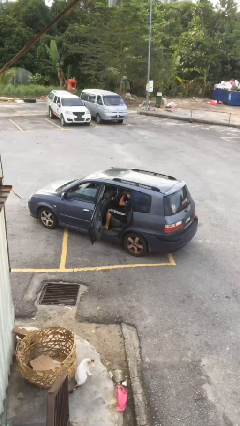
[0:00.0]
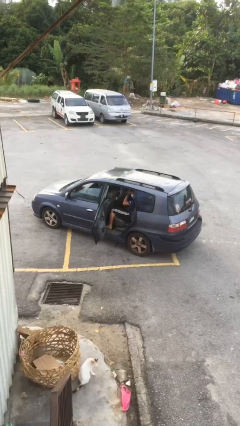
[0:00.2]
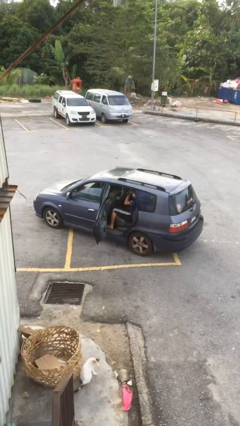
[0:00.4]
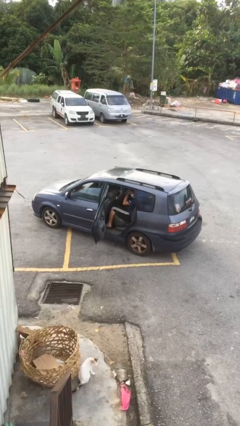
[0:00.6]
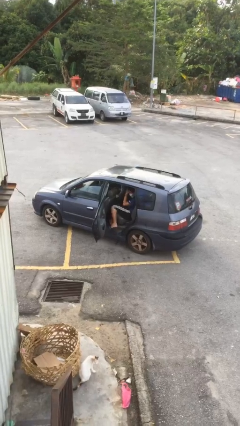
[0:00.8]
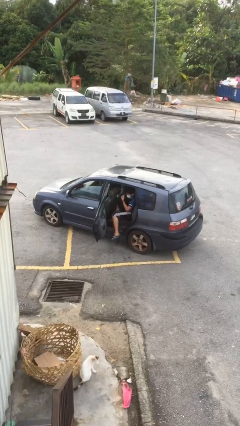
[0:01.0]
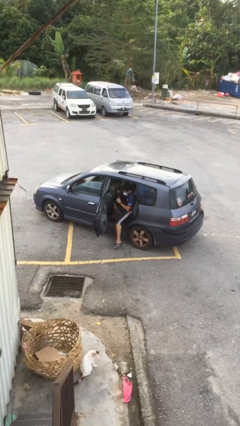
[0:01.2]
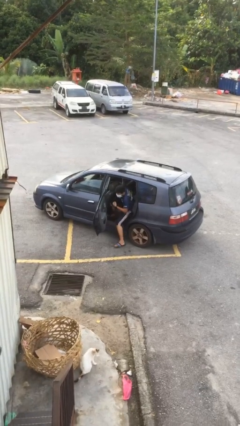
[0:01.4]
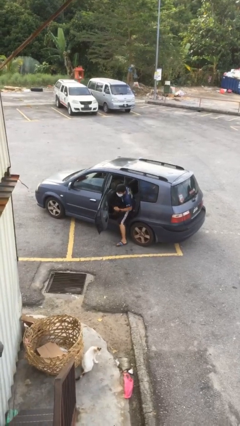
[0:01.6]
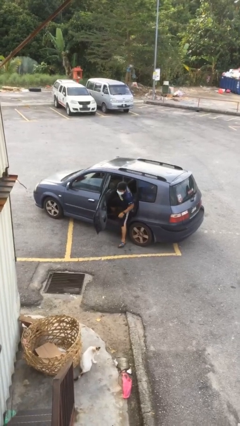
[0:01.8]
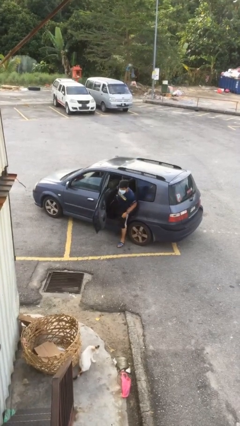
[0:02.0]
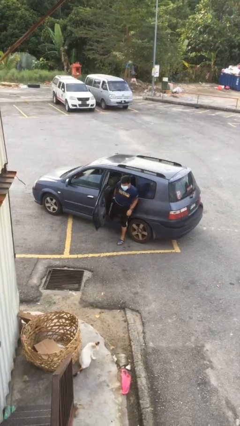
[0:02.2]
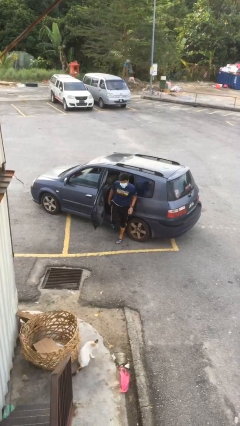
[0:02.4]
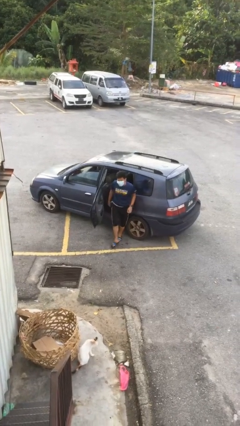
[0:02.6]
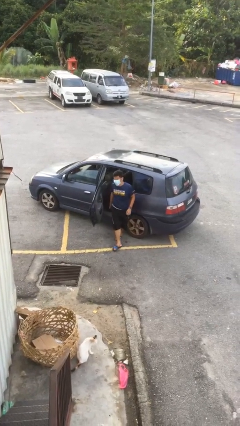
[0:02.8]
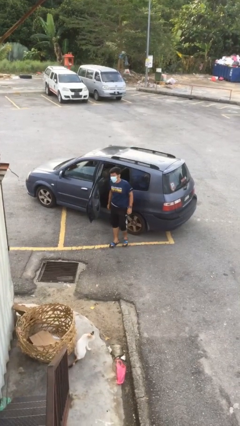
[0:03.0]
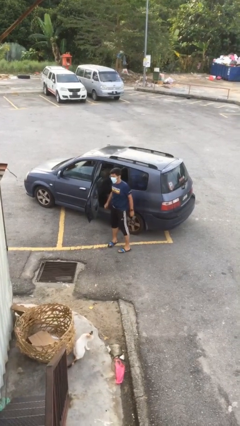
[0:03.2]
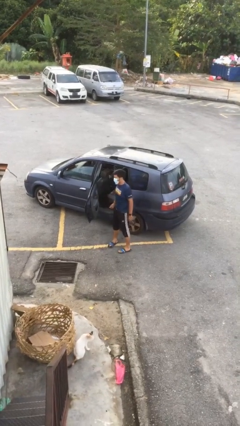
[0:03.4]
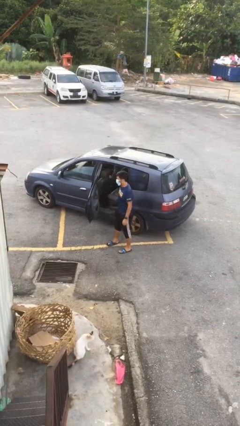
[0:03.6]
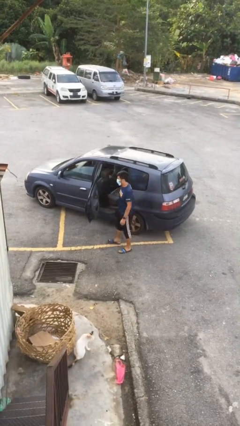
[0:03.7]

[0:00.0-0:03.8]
person exits car

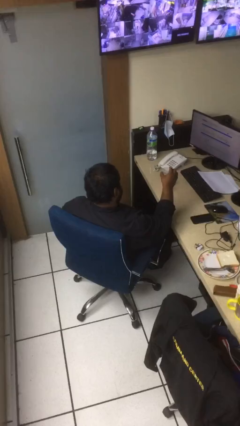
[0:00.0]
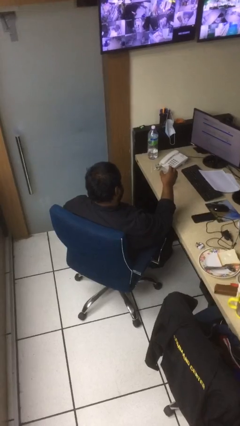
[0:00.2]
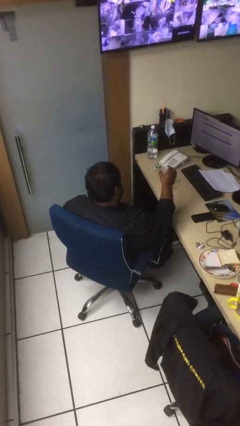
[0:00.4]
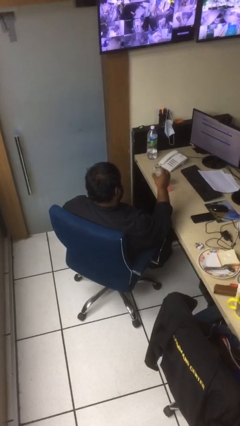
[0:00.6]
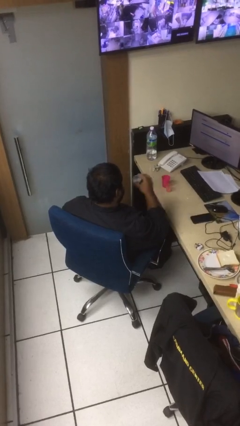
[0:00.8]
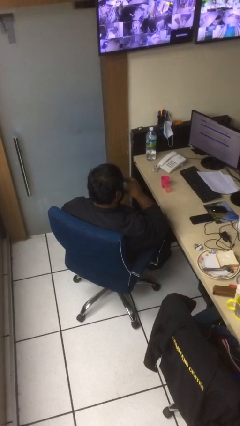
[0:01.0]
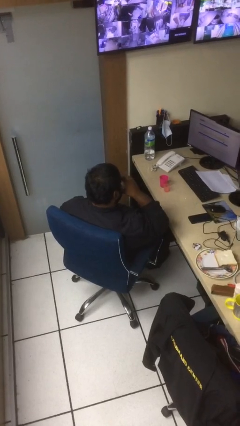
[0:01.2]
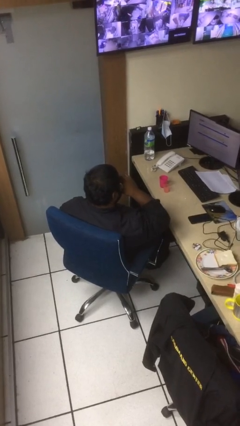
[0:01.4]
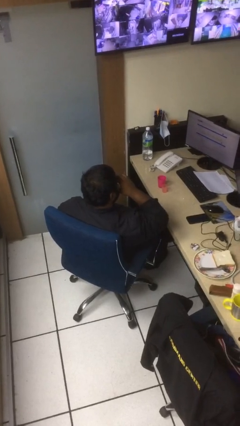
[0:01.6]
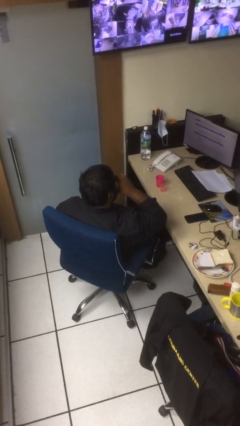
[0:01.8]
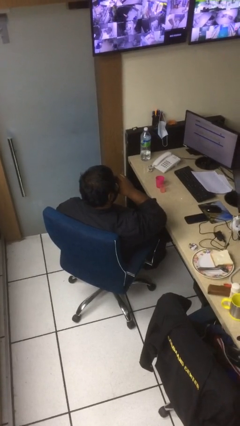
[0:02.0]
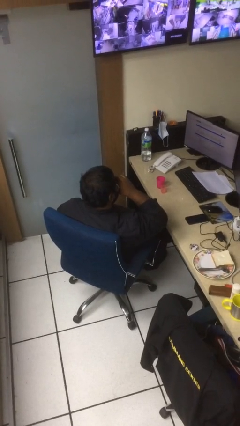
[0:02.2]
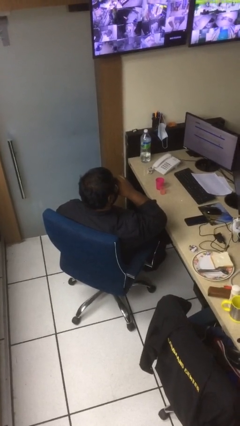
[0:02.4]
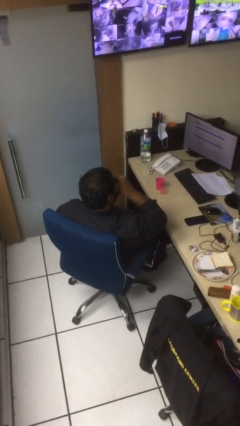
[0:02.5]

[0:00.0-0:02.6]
person drinks from shotglass

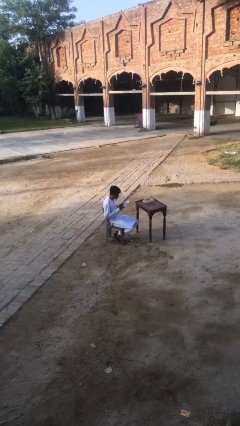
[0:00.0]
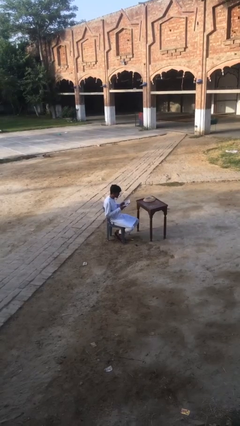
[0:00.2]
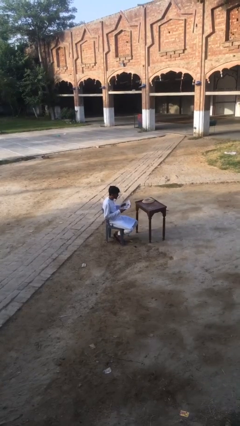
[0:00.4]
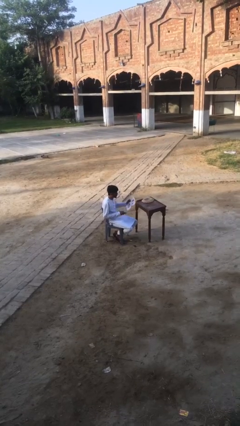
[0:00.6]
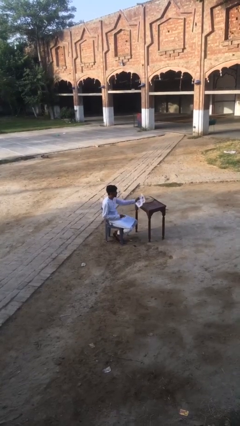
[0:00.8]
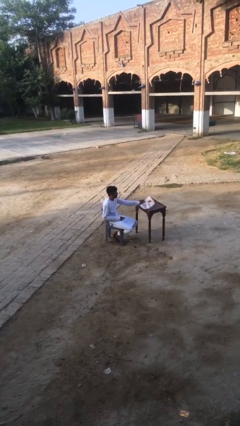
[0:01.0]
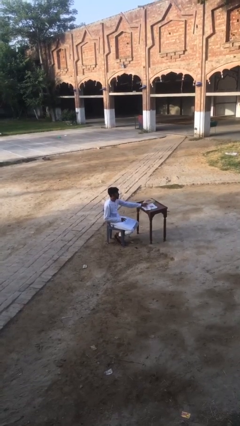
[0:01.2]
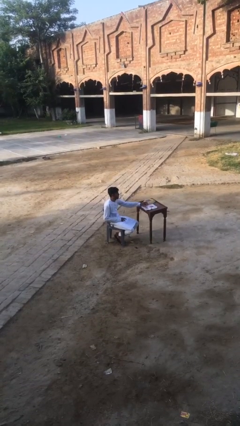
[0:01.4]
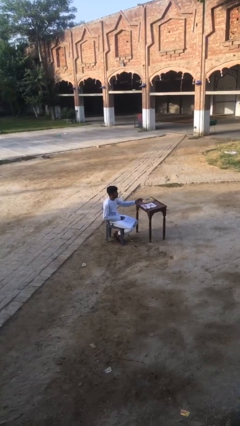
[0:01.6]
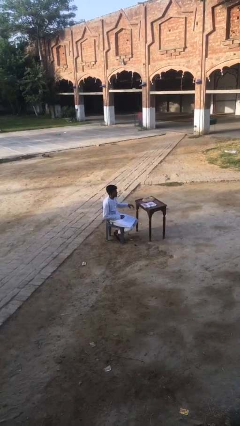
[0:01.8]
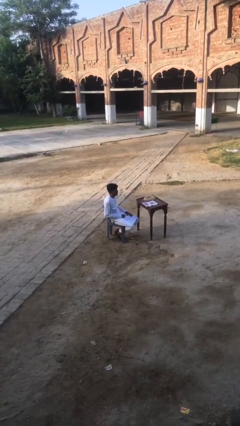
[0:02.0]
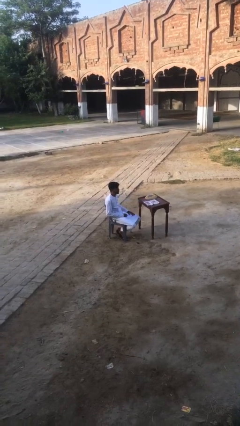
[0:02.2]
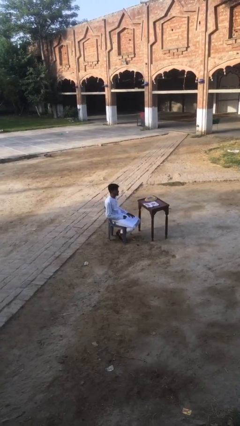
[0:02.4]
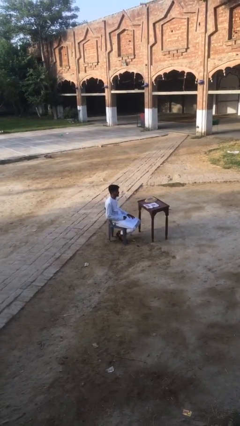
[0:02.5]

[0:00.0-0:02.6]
person puts down object on table

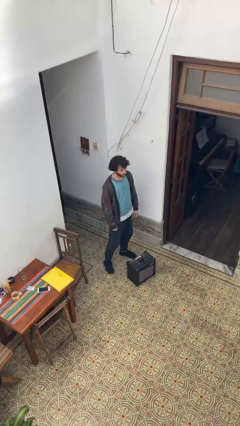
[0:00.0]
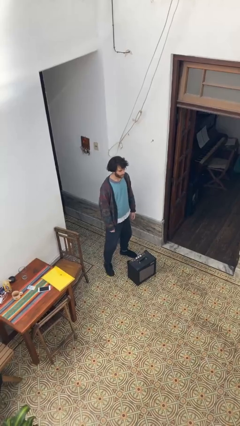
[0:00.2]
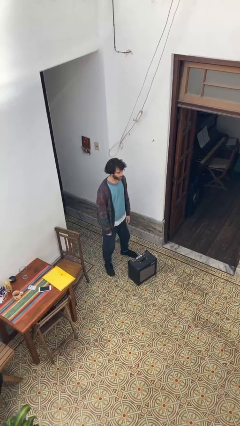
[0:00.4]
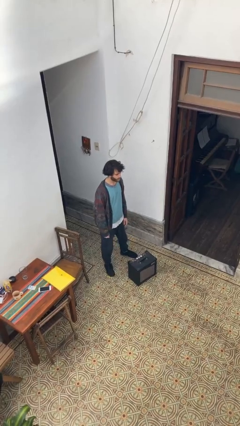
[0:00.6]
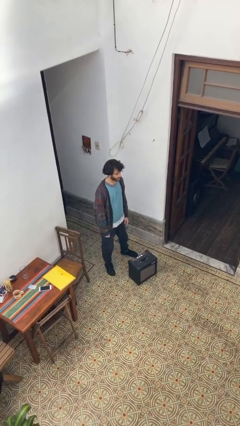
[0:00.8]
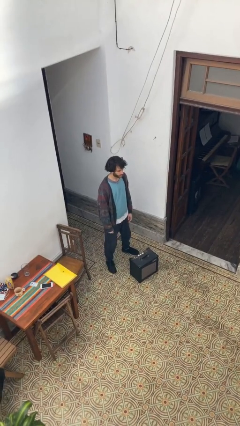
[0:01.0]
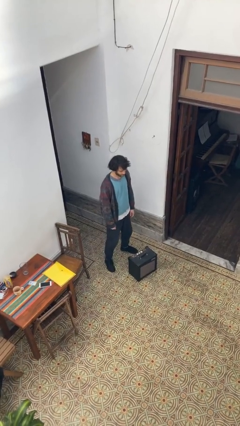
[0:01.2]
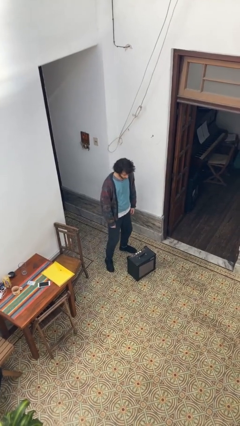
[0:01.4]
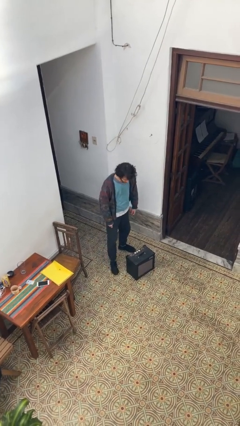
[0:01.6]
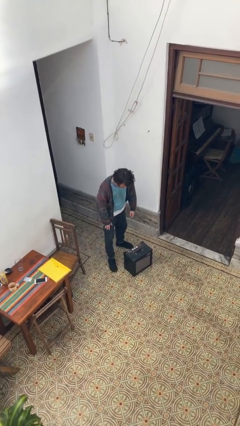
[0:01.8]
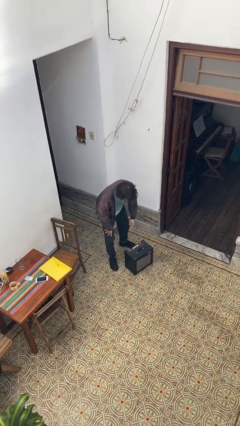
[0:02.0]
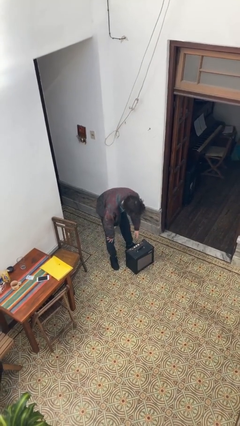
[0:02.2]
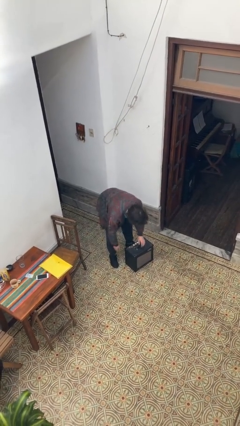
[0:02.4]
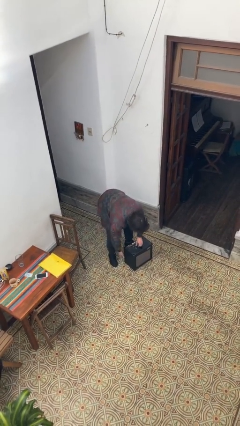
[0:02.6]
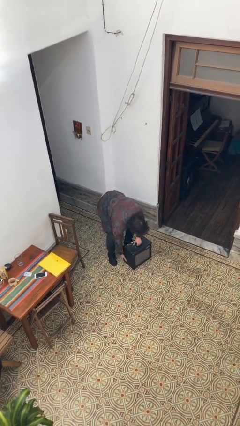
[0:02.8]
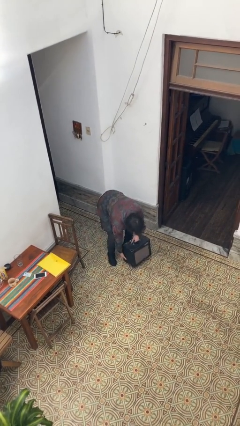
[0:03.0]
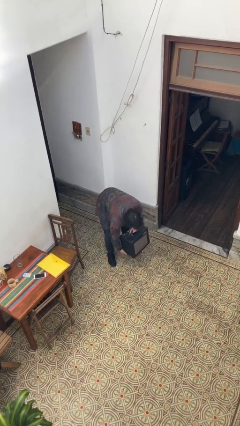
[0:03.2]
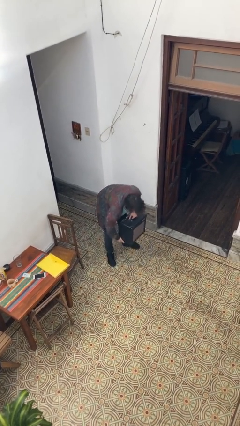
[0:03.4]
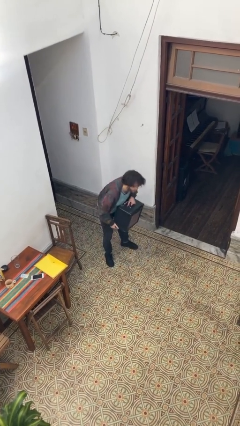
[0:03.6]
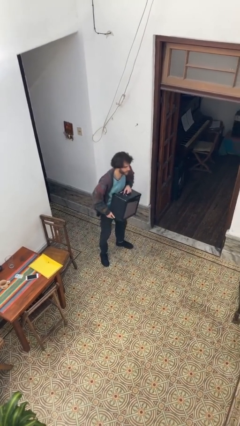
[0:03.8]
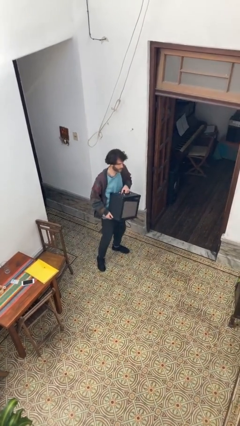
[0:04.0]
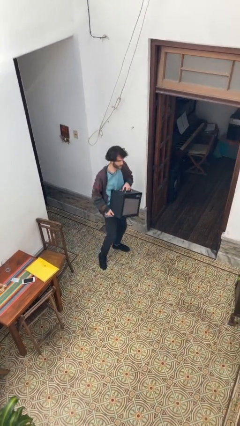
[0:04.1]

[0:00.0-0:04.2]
person picks up object from floor

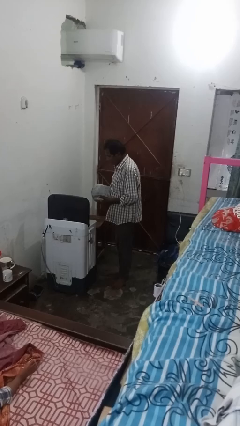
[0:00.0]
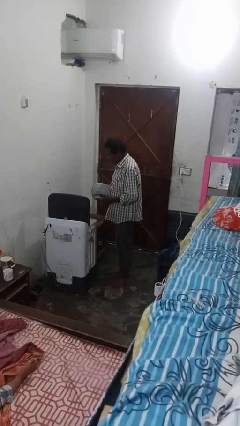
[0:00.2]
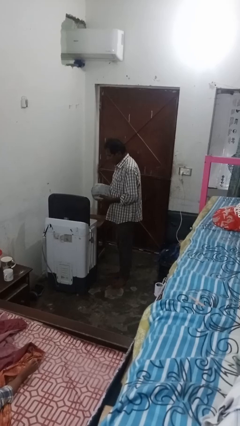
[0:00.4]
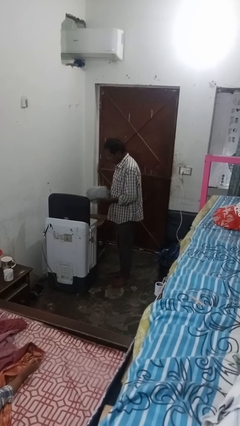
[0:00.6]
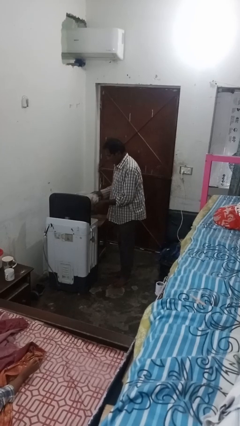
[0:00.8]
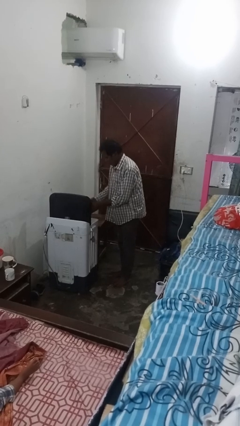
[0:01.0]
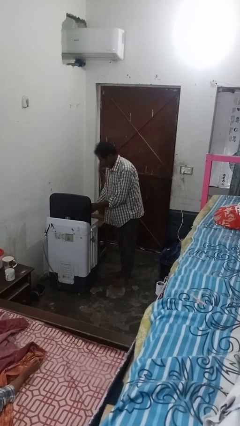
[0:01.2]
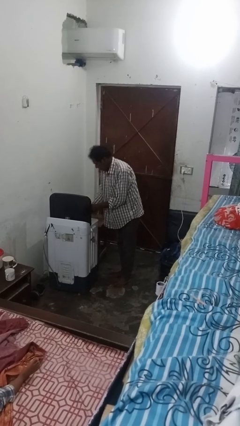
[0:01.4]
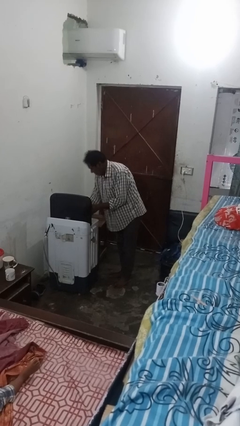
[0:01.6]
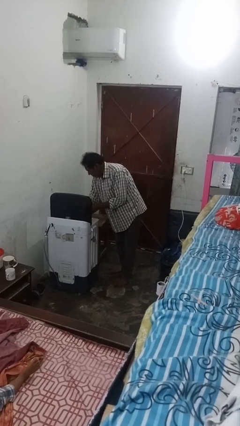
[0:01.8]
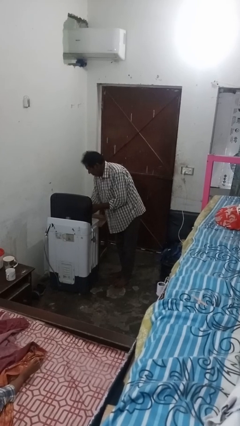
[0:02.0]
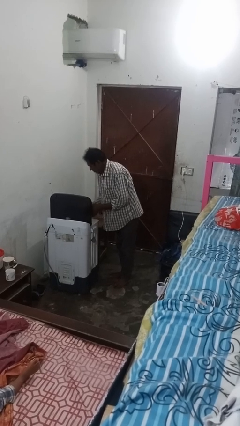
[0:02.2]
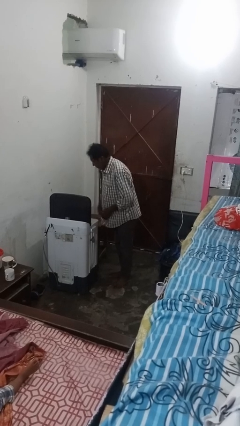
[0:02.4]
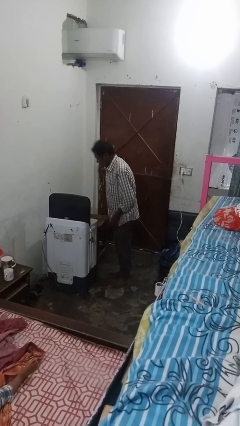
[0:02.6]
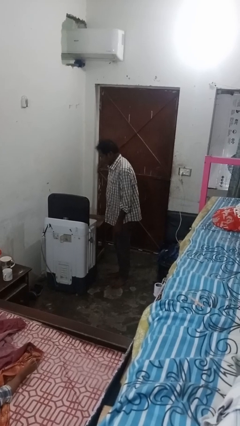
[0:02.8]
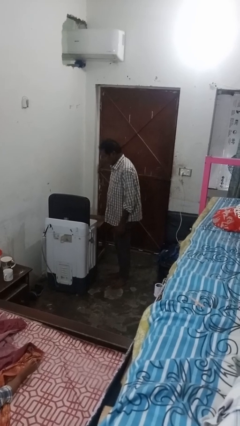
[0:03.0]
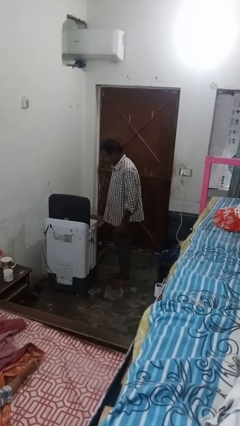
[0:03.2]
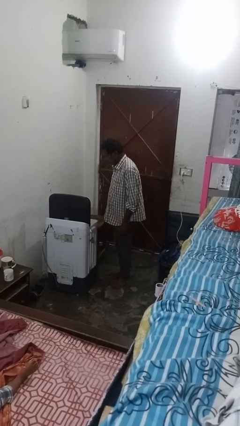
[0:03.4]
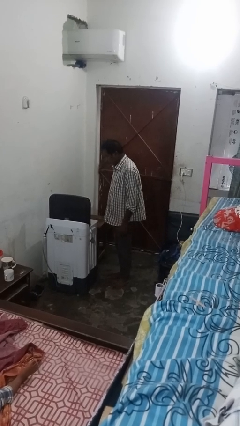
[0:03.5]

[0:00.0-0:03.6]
person loads dryer

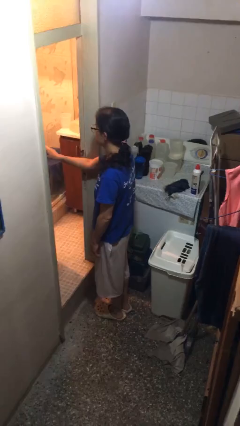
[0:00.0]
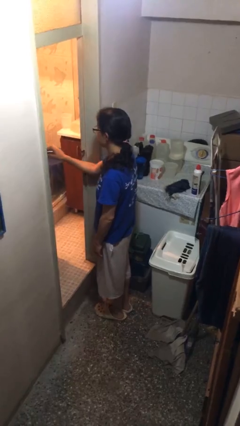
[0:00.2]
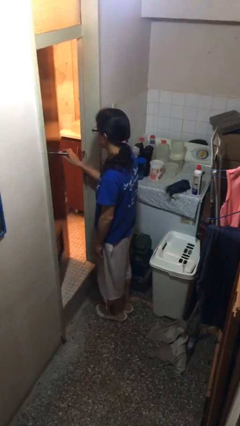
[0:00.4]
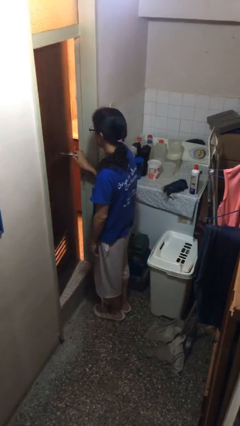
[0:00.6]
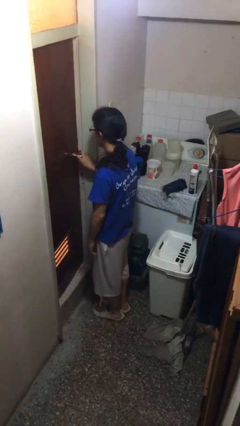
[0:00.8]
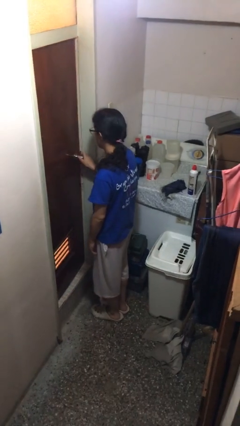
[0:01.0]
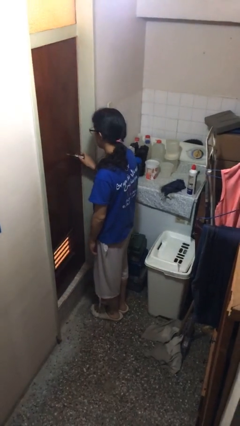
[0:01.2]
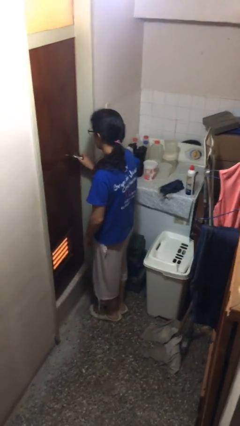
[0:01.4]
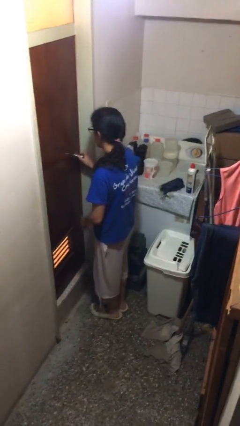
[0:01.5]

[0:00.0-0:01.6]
person closes facility door
